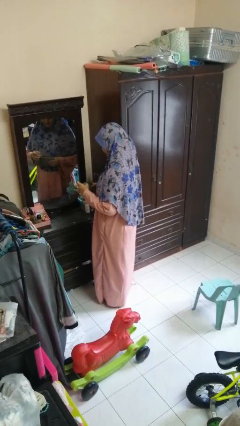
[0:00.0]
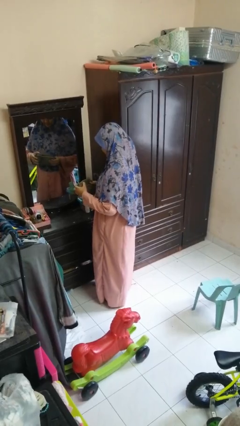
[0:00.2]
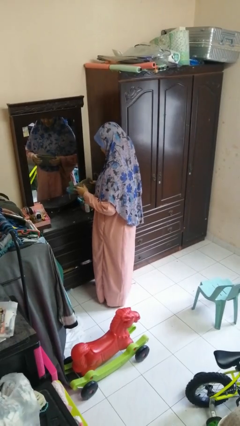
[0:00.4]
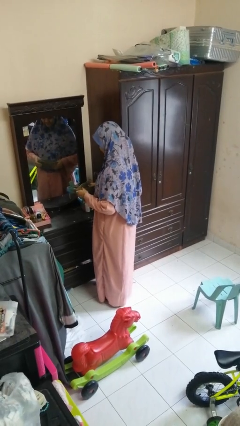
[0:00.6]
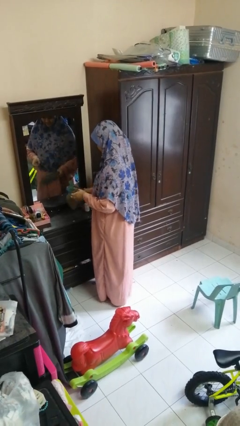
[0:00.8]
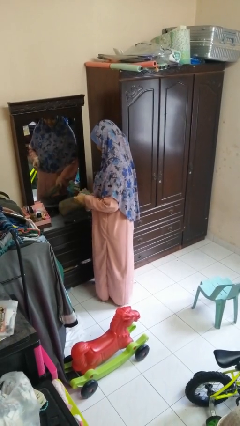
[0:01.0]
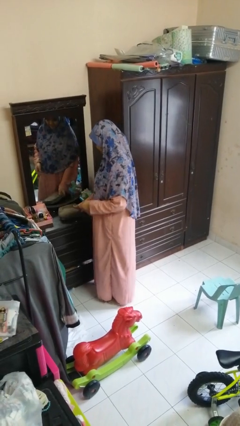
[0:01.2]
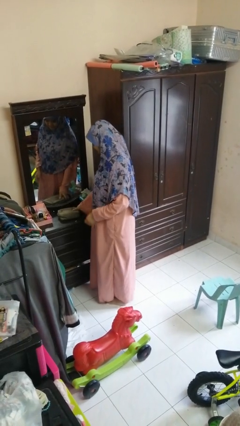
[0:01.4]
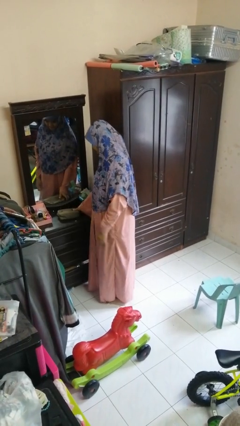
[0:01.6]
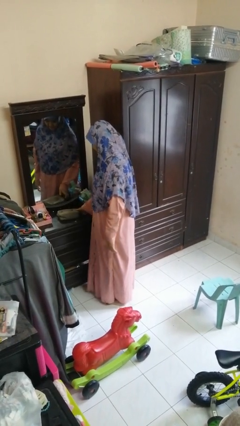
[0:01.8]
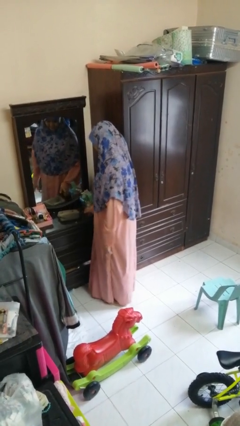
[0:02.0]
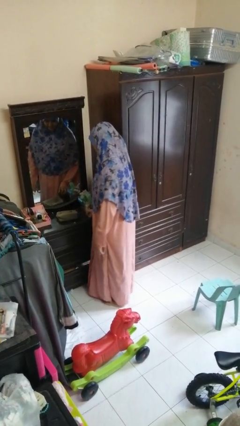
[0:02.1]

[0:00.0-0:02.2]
person puts down object on countertop

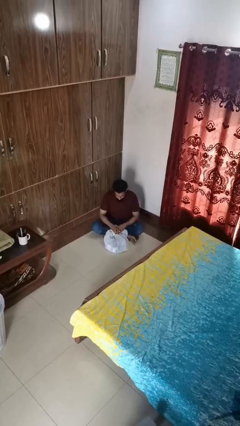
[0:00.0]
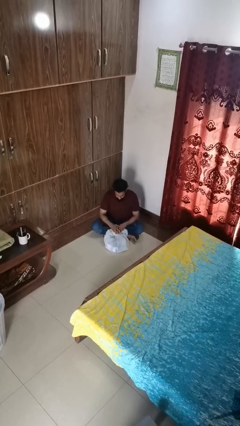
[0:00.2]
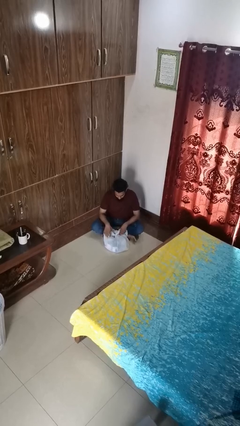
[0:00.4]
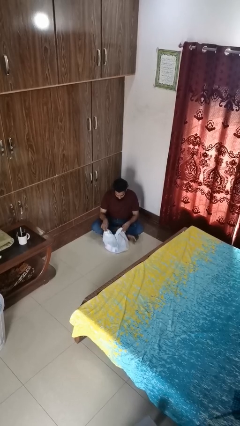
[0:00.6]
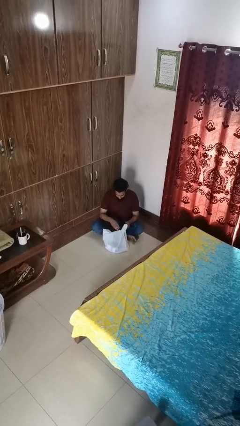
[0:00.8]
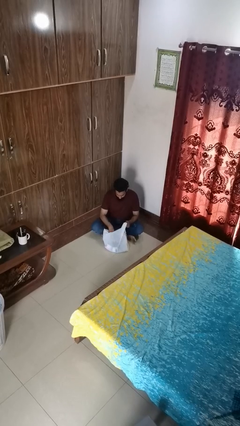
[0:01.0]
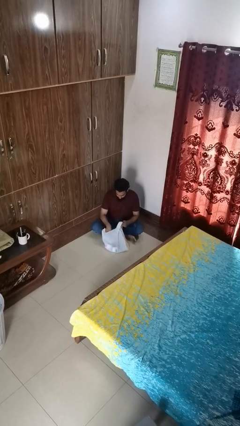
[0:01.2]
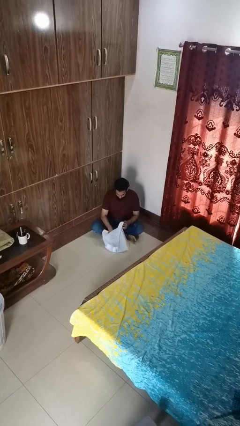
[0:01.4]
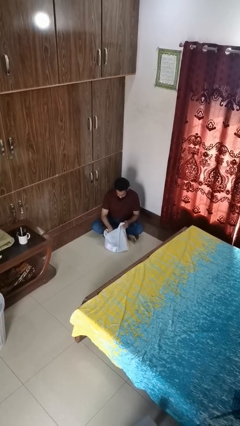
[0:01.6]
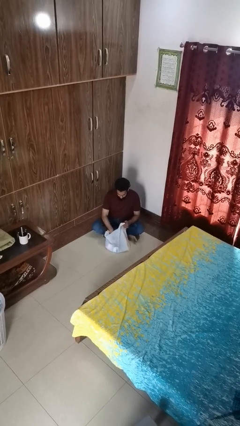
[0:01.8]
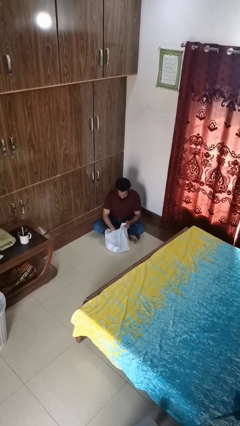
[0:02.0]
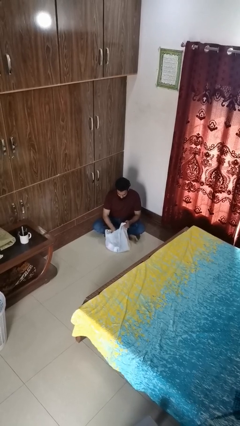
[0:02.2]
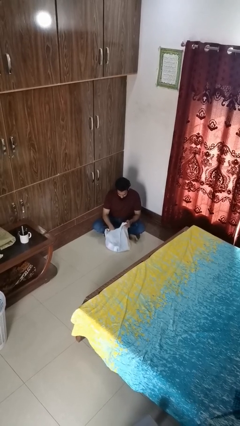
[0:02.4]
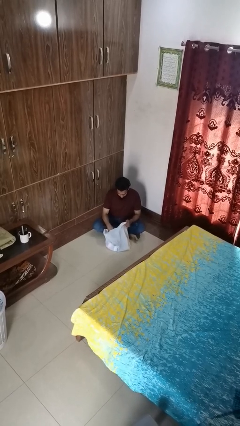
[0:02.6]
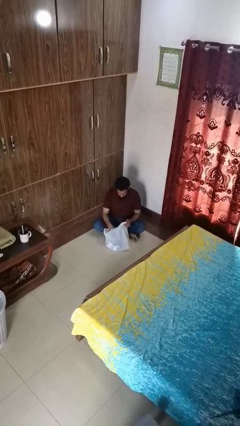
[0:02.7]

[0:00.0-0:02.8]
person searches in bag

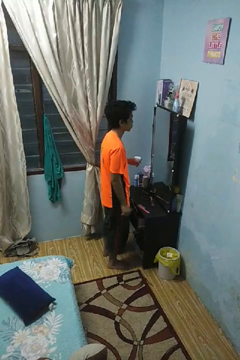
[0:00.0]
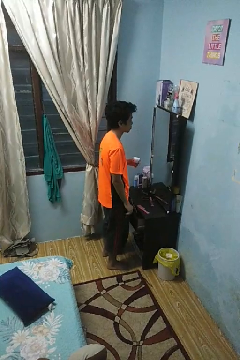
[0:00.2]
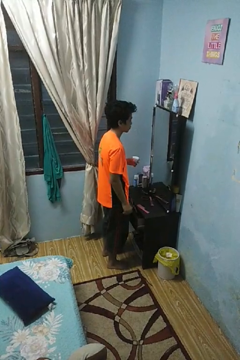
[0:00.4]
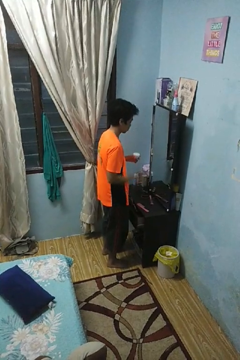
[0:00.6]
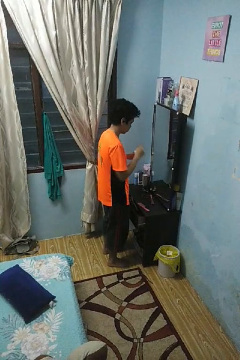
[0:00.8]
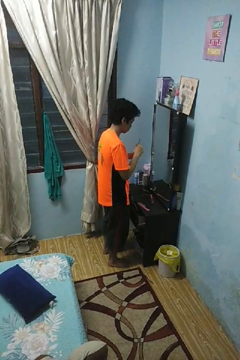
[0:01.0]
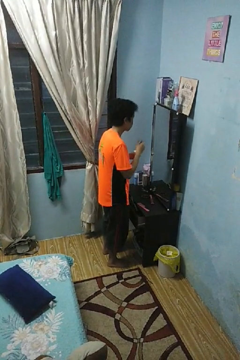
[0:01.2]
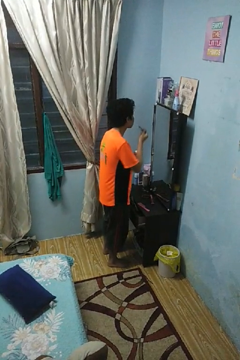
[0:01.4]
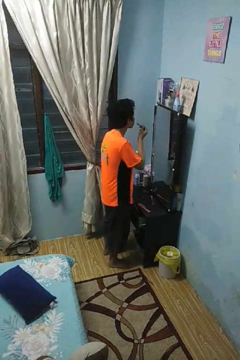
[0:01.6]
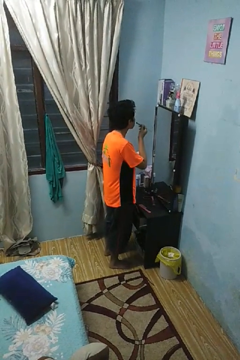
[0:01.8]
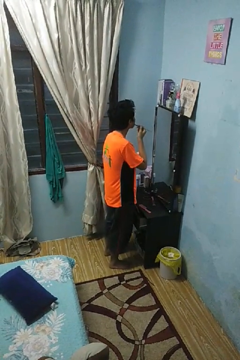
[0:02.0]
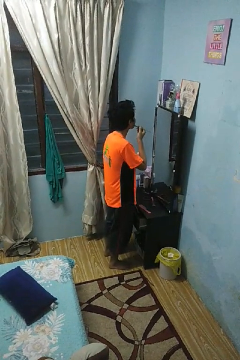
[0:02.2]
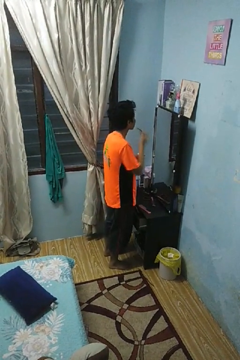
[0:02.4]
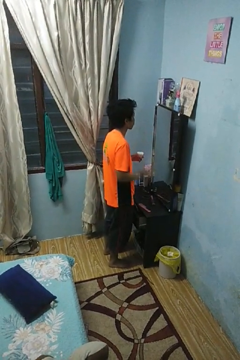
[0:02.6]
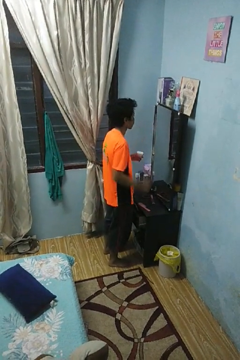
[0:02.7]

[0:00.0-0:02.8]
person applies foundation makeup

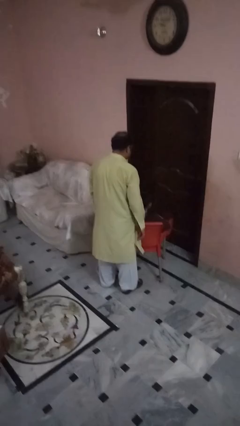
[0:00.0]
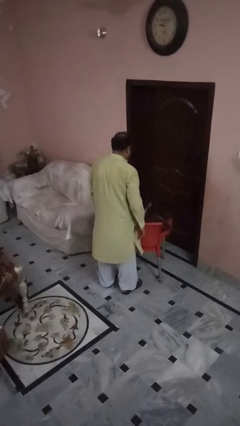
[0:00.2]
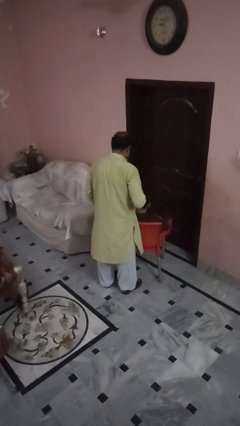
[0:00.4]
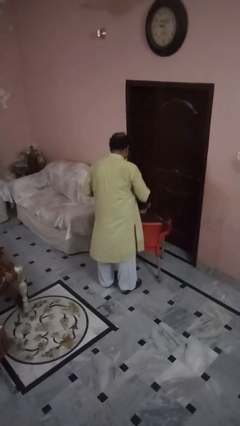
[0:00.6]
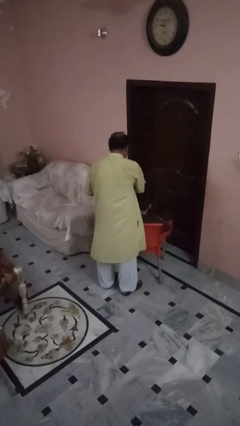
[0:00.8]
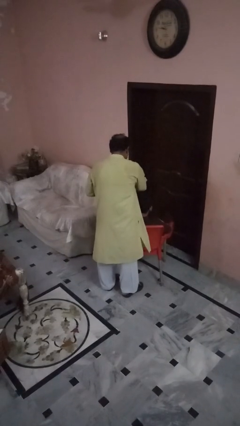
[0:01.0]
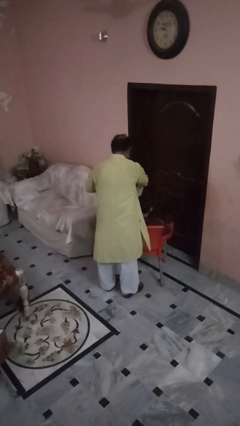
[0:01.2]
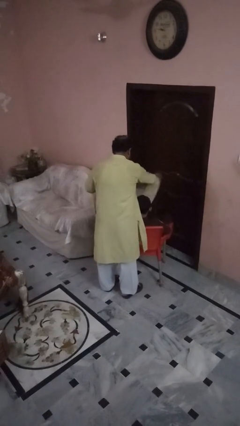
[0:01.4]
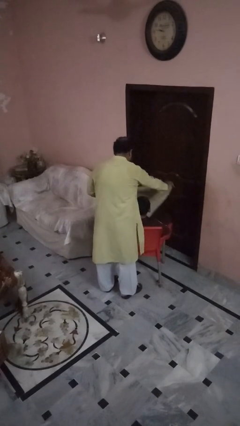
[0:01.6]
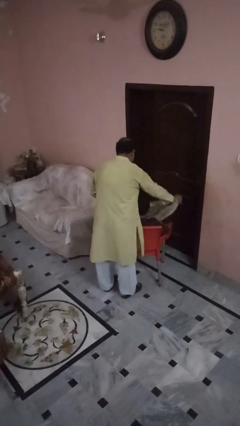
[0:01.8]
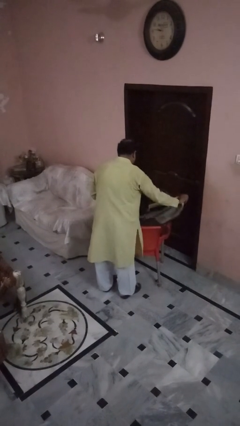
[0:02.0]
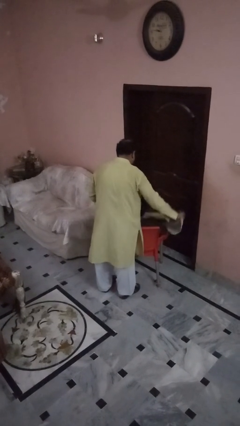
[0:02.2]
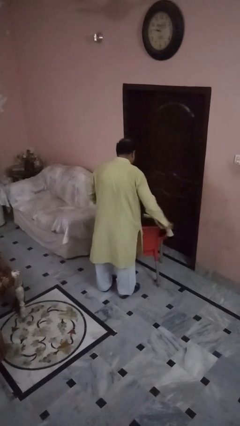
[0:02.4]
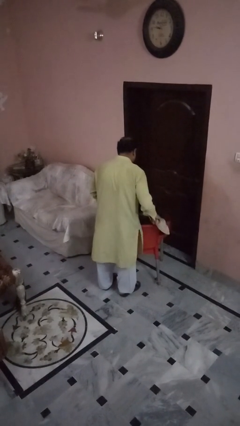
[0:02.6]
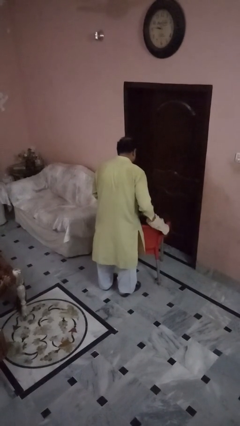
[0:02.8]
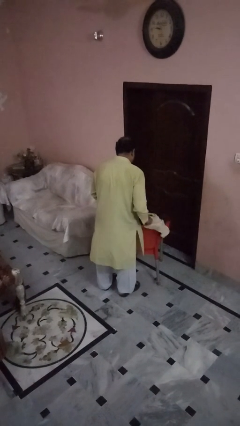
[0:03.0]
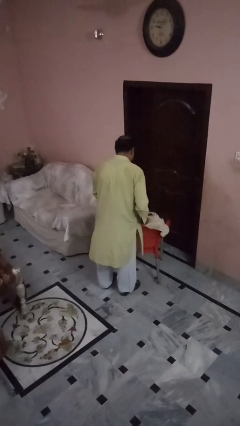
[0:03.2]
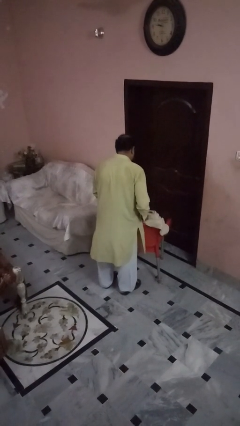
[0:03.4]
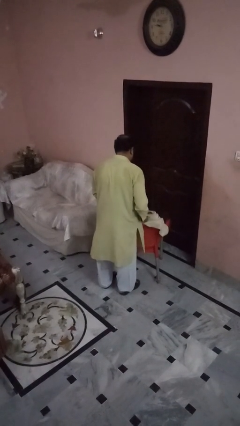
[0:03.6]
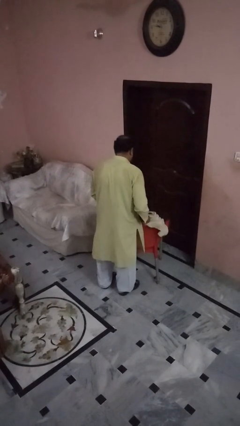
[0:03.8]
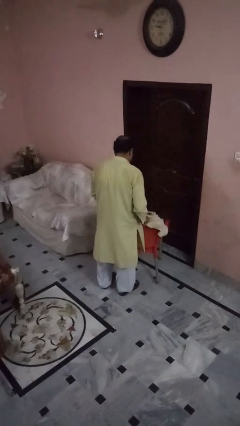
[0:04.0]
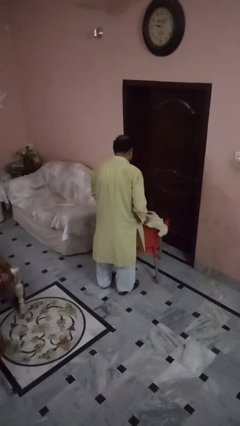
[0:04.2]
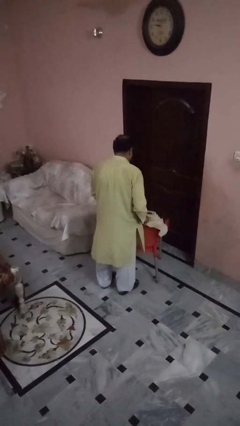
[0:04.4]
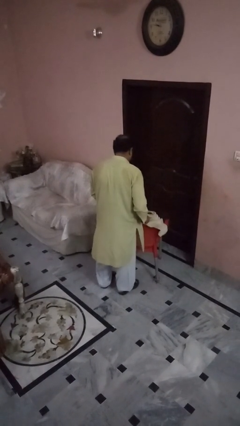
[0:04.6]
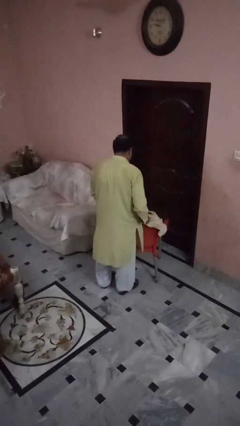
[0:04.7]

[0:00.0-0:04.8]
person covers friend with blanket

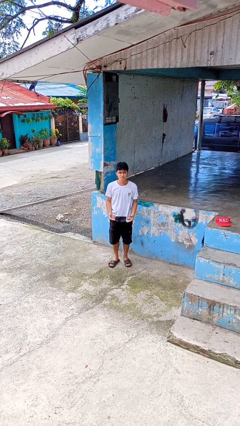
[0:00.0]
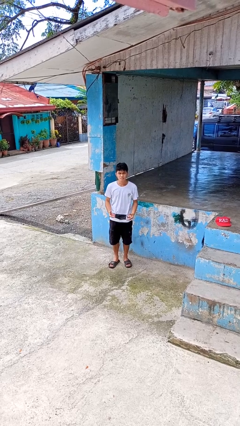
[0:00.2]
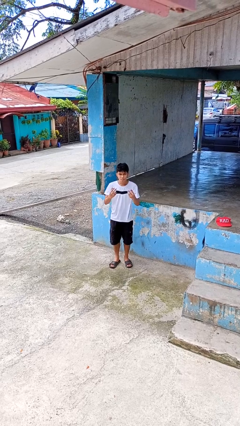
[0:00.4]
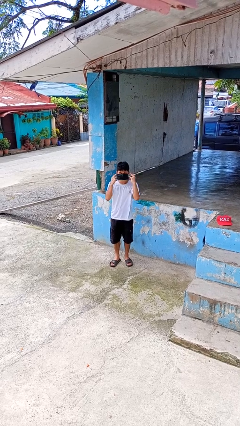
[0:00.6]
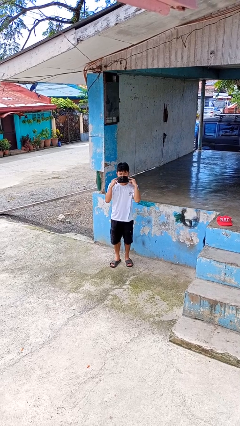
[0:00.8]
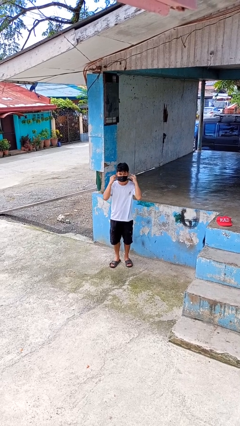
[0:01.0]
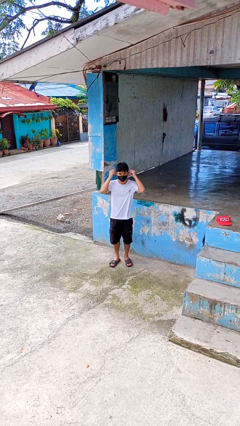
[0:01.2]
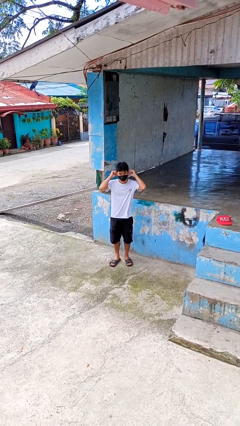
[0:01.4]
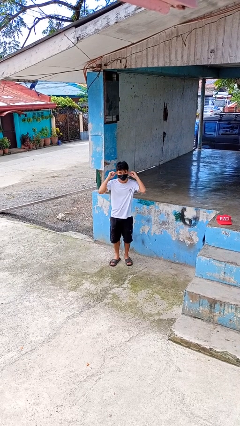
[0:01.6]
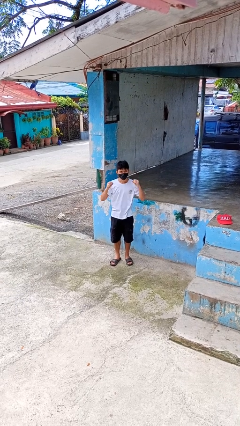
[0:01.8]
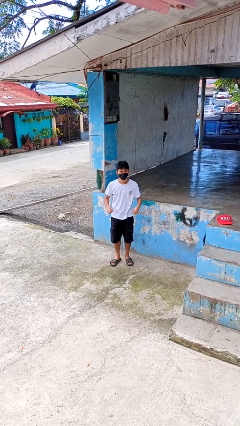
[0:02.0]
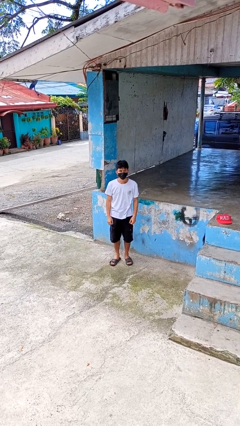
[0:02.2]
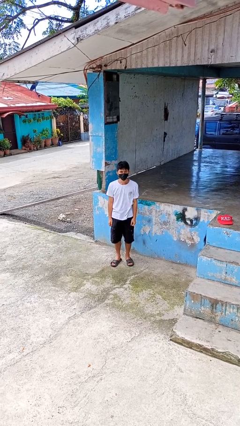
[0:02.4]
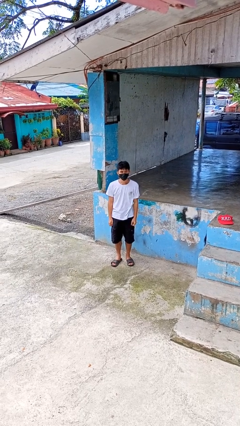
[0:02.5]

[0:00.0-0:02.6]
person puts on facemask

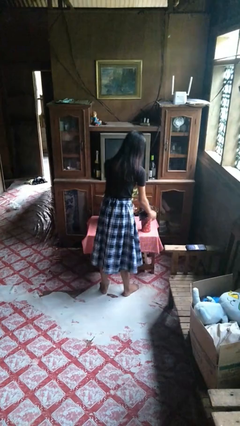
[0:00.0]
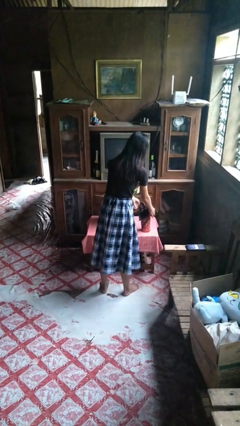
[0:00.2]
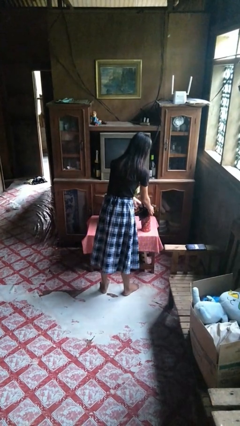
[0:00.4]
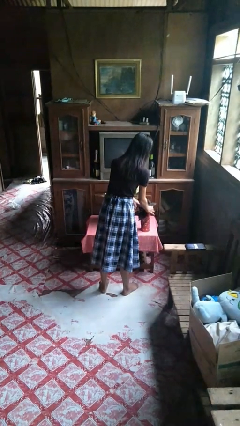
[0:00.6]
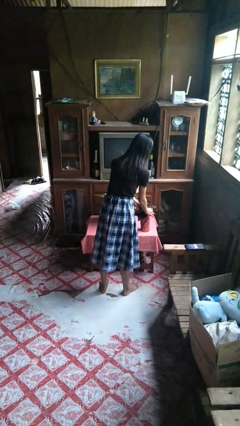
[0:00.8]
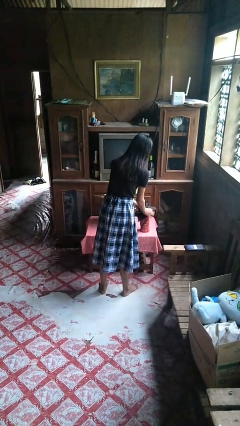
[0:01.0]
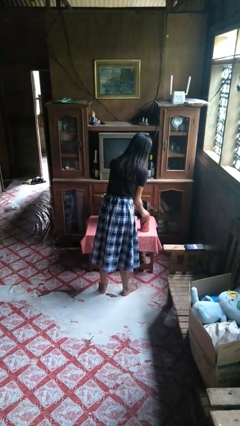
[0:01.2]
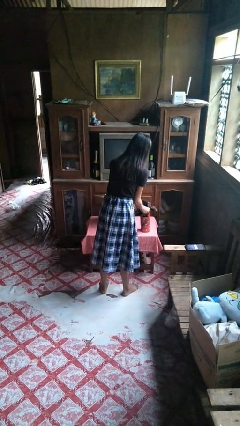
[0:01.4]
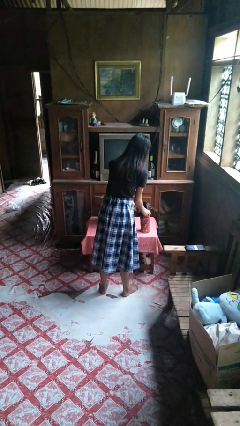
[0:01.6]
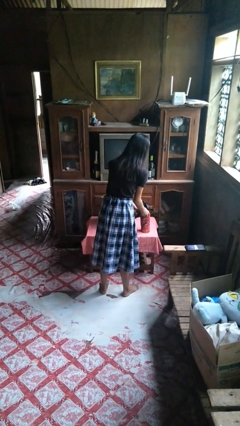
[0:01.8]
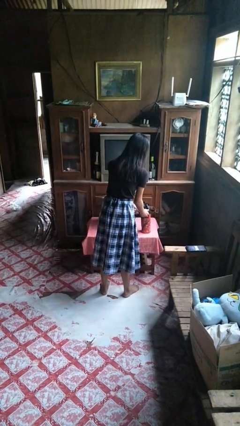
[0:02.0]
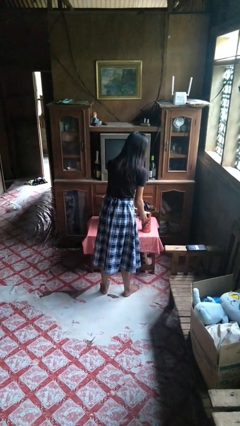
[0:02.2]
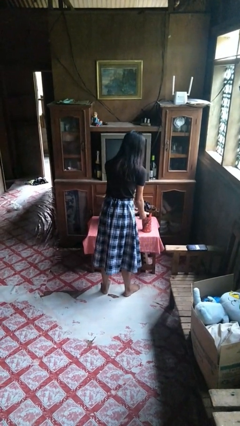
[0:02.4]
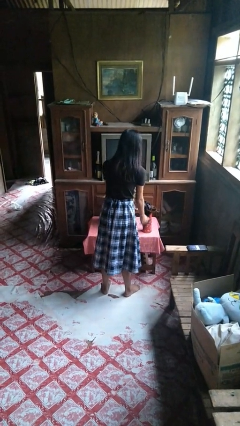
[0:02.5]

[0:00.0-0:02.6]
person arranges flowers in vase
